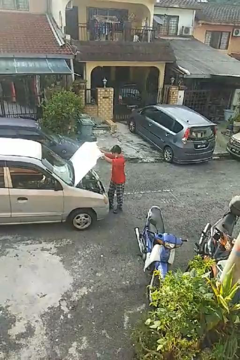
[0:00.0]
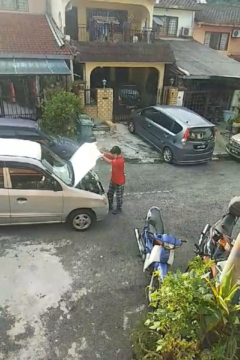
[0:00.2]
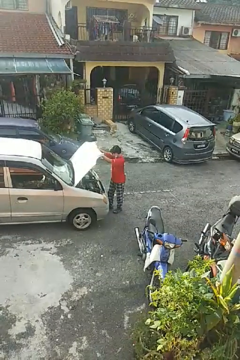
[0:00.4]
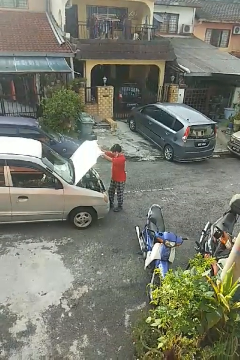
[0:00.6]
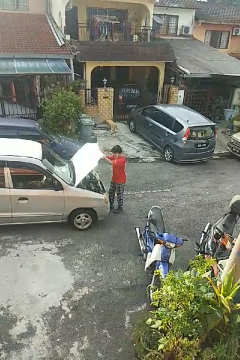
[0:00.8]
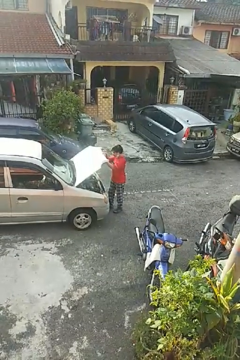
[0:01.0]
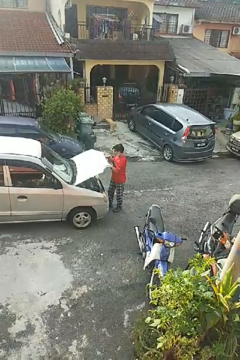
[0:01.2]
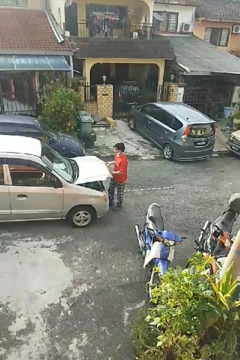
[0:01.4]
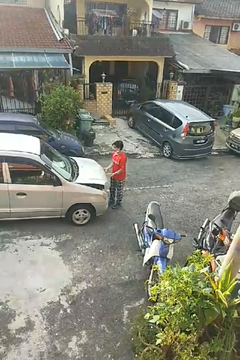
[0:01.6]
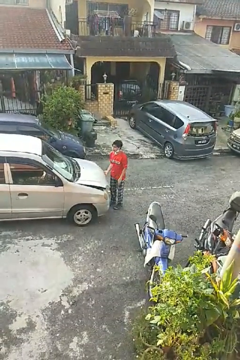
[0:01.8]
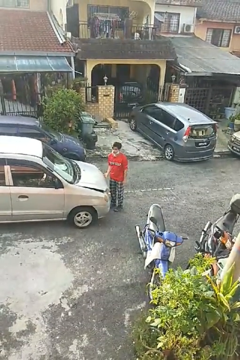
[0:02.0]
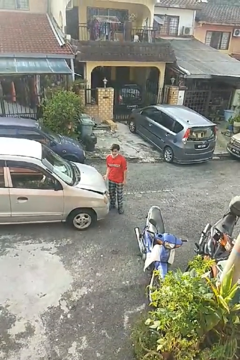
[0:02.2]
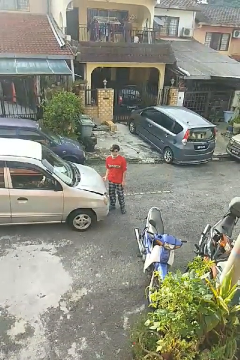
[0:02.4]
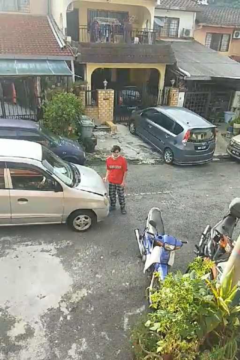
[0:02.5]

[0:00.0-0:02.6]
person closes car hood

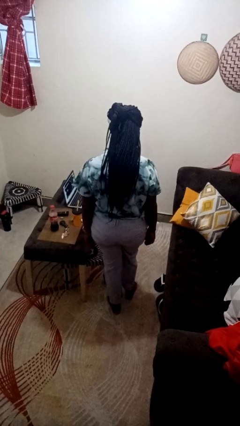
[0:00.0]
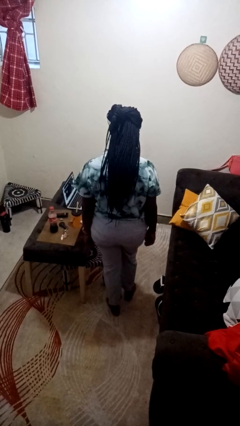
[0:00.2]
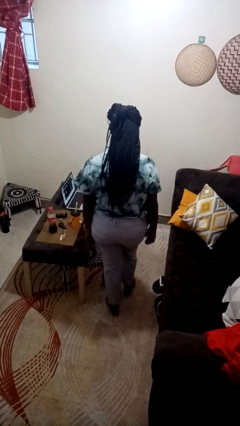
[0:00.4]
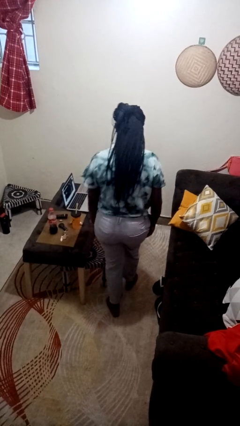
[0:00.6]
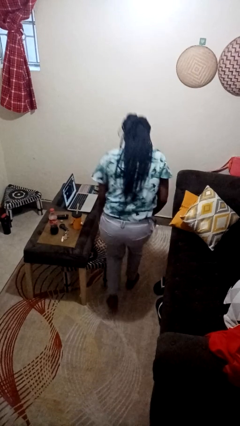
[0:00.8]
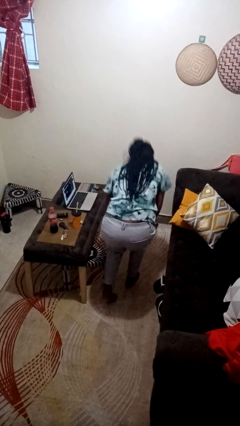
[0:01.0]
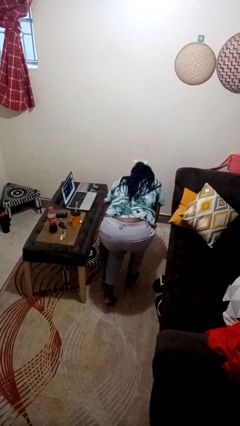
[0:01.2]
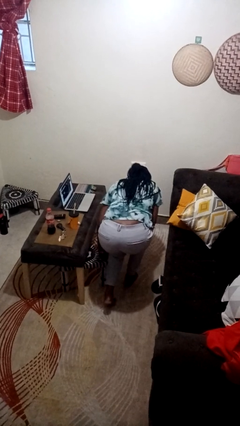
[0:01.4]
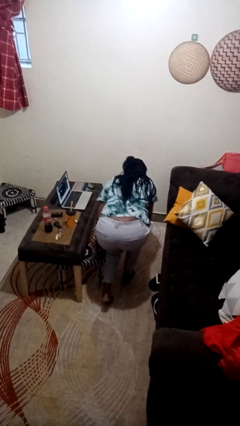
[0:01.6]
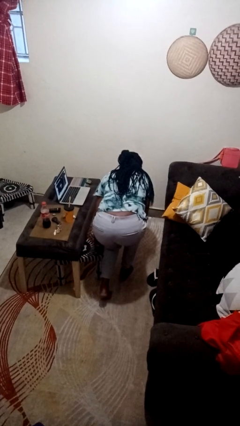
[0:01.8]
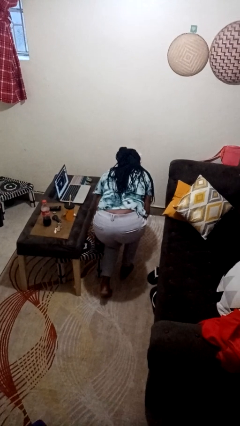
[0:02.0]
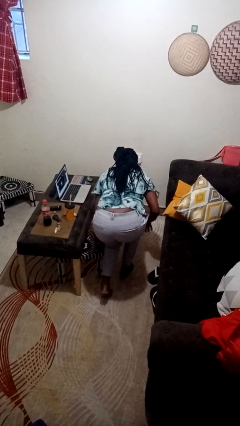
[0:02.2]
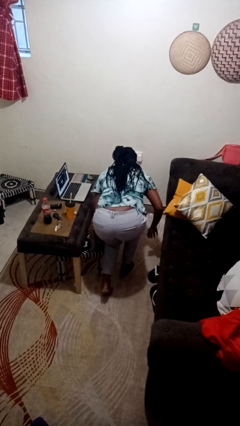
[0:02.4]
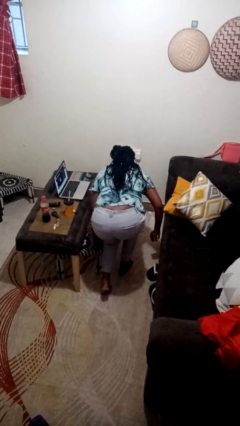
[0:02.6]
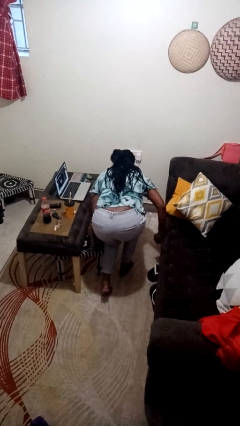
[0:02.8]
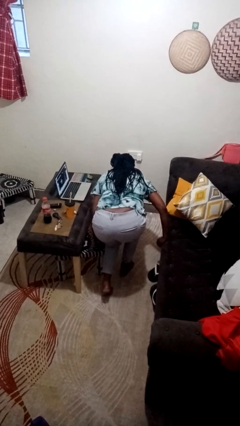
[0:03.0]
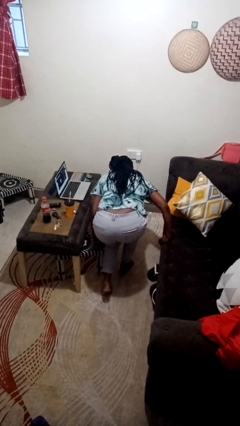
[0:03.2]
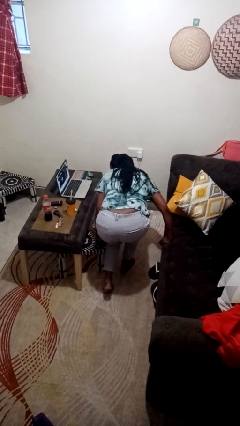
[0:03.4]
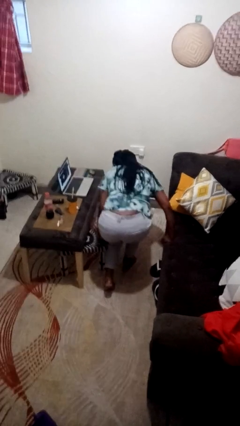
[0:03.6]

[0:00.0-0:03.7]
person trips on object on floor

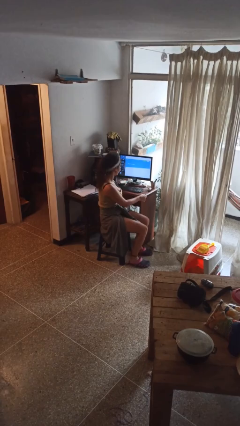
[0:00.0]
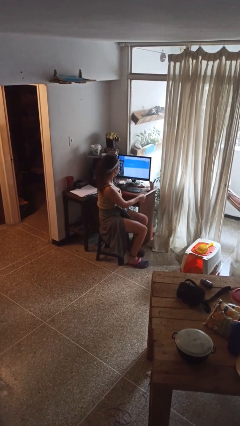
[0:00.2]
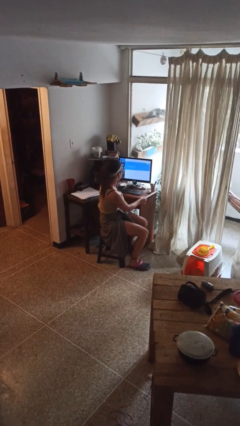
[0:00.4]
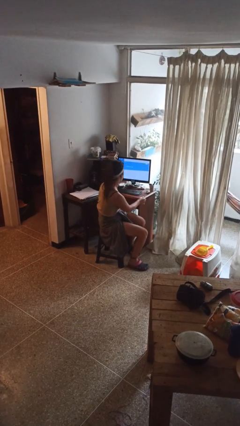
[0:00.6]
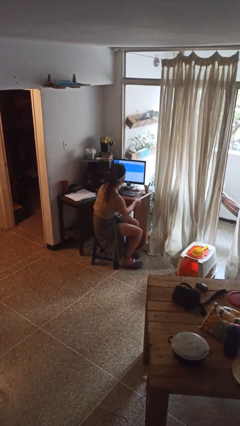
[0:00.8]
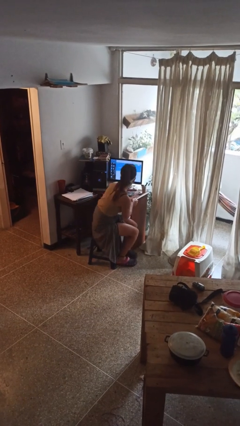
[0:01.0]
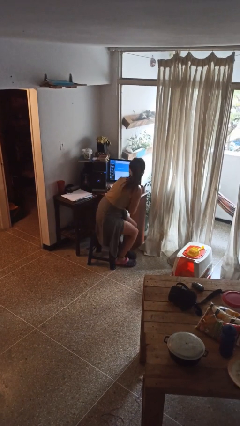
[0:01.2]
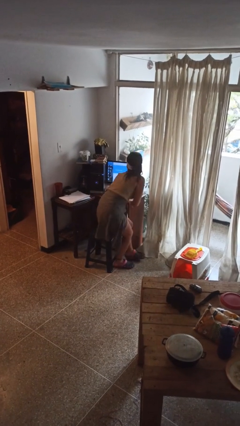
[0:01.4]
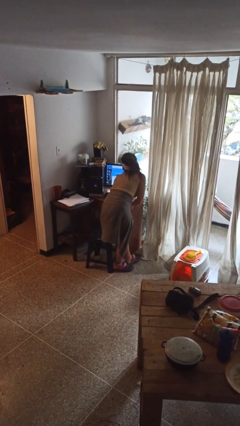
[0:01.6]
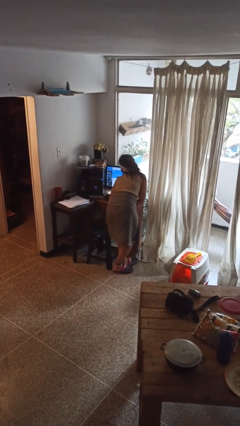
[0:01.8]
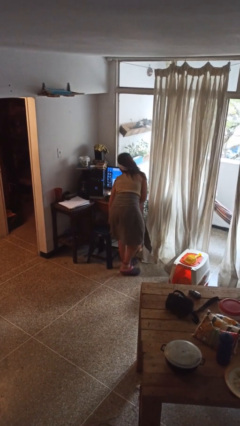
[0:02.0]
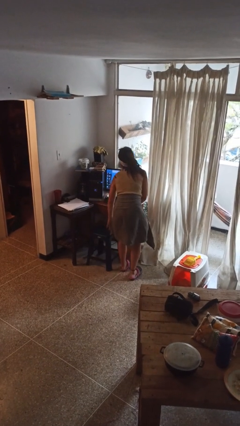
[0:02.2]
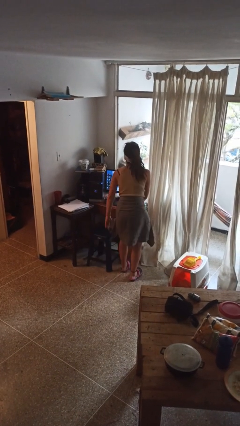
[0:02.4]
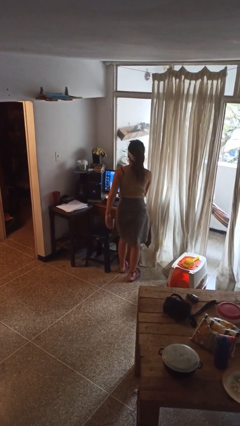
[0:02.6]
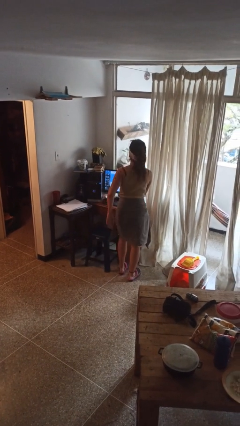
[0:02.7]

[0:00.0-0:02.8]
person stands up

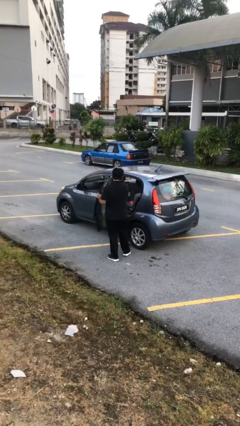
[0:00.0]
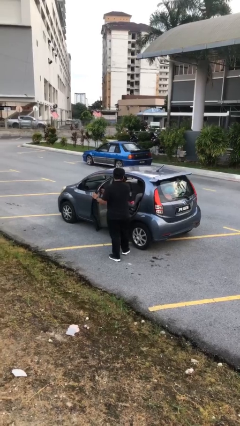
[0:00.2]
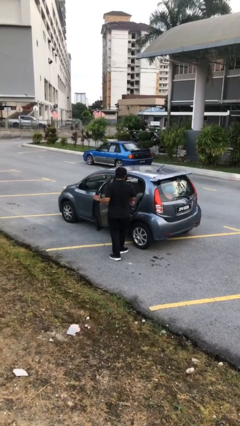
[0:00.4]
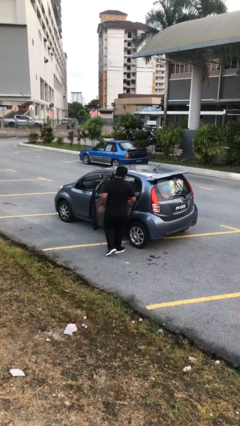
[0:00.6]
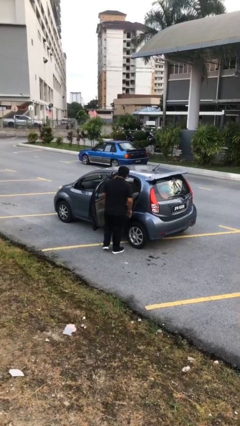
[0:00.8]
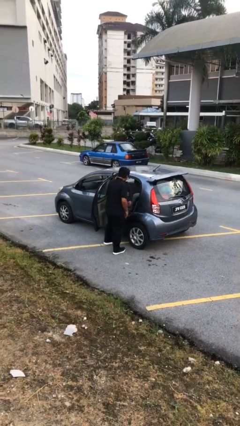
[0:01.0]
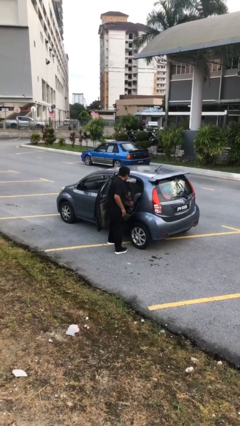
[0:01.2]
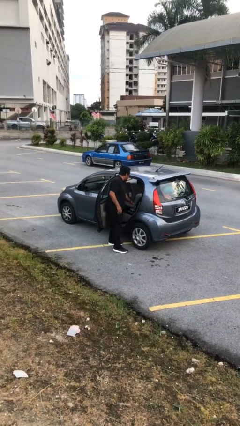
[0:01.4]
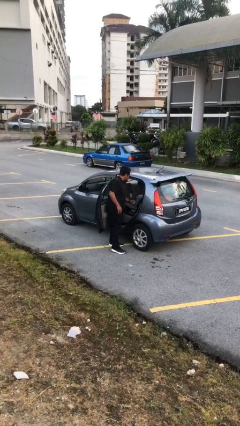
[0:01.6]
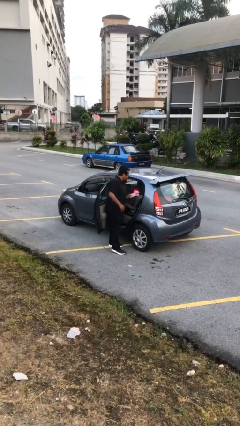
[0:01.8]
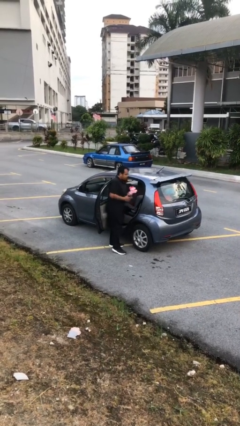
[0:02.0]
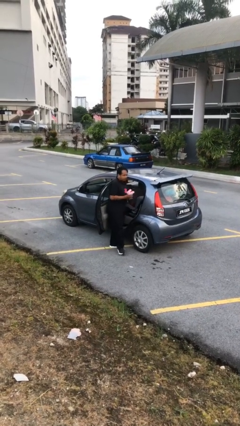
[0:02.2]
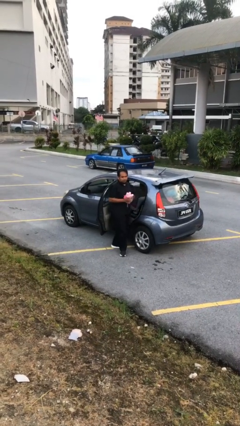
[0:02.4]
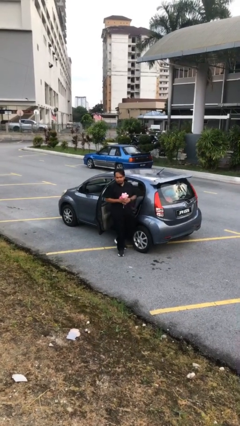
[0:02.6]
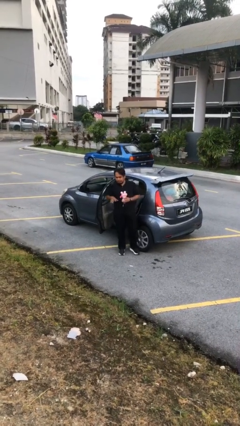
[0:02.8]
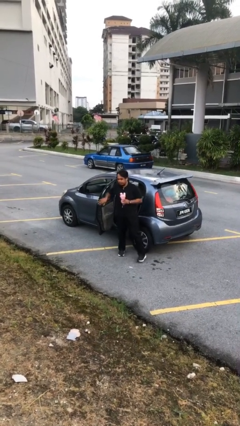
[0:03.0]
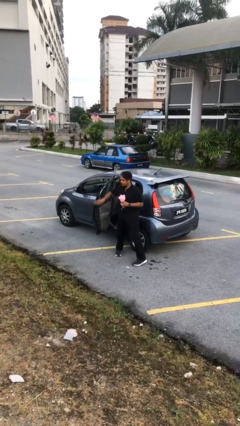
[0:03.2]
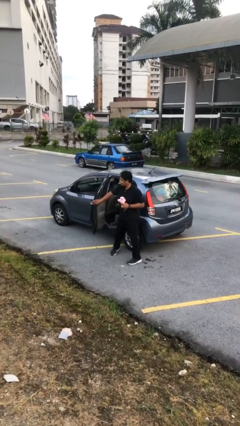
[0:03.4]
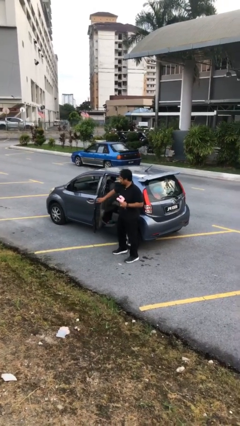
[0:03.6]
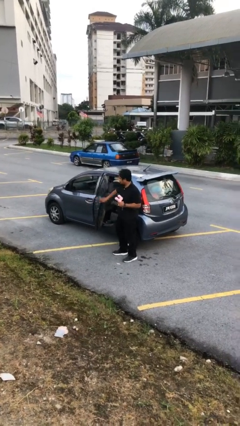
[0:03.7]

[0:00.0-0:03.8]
person unloads car

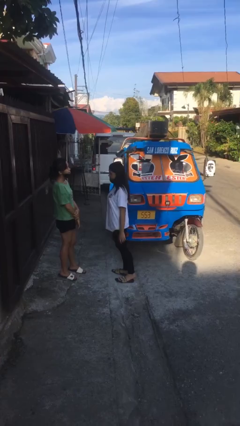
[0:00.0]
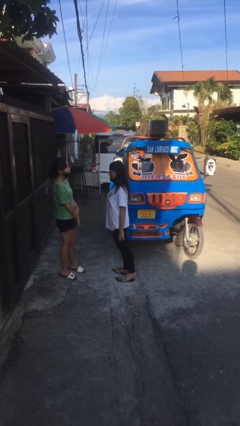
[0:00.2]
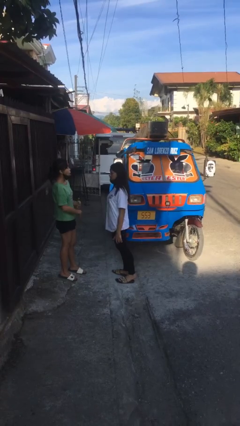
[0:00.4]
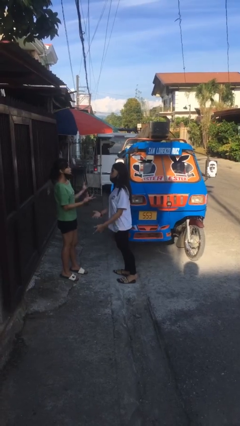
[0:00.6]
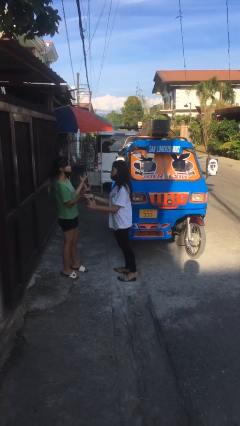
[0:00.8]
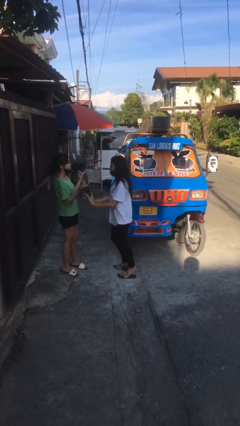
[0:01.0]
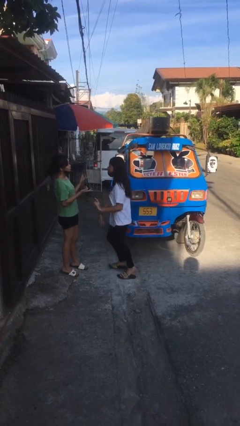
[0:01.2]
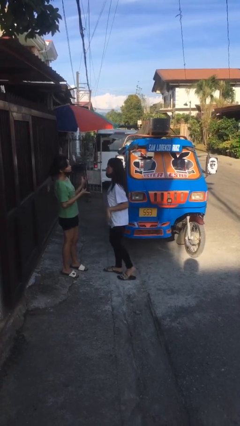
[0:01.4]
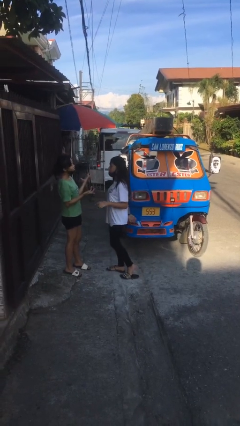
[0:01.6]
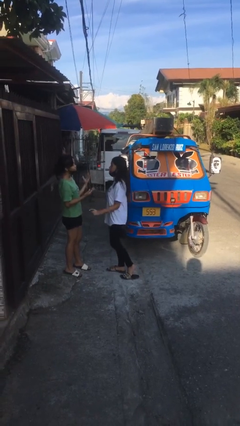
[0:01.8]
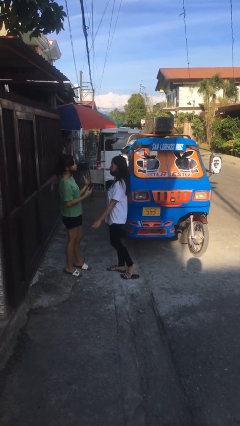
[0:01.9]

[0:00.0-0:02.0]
person talks to person

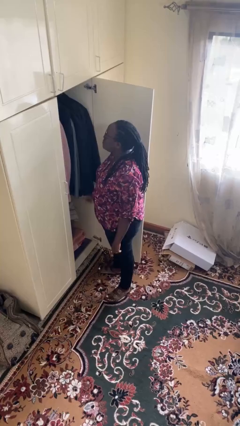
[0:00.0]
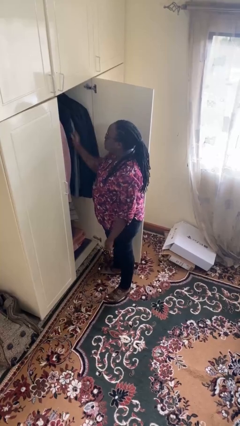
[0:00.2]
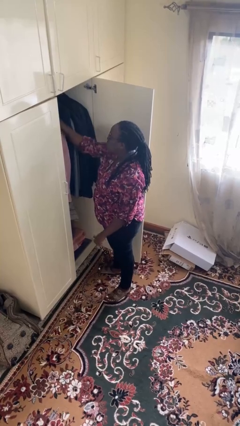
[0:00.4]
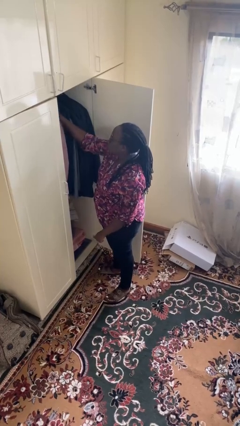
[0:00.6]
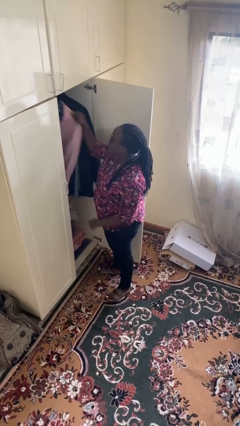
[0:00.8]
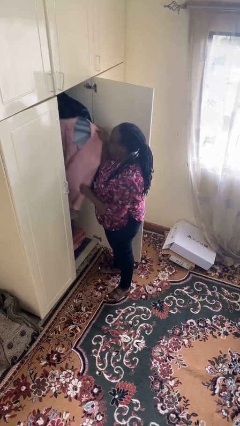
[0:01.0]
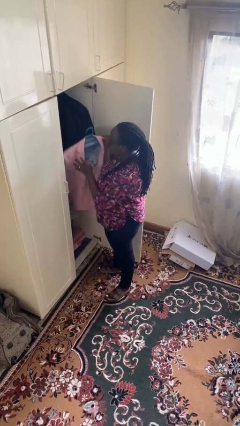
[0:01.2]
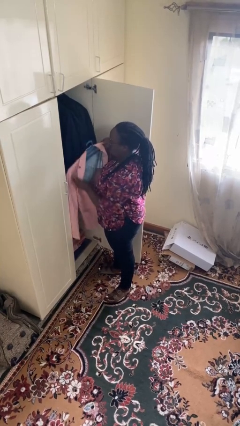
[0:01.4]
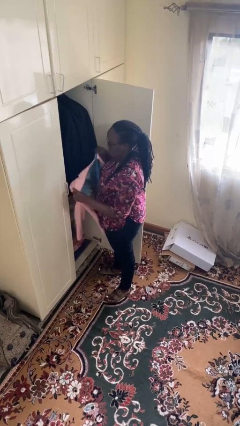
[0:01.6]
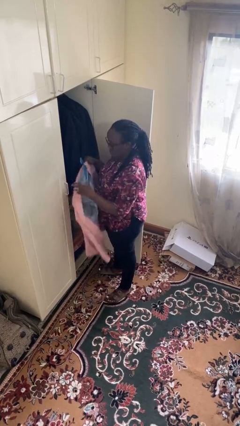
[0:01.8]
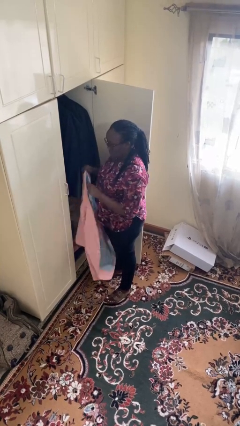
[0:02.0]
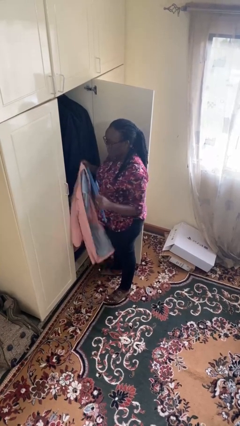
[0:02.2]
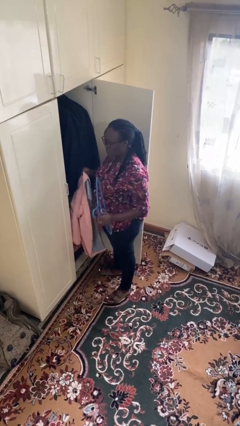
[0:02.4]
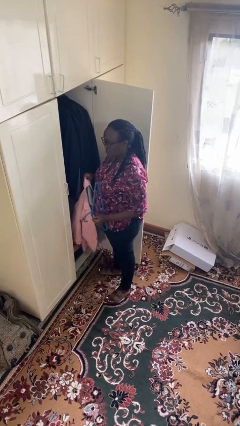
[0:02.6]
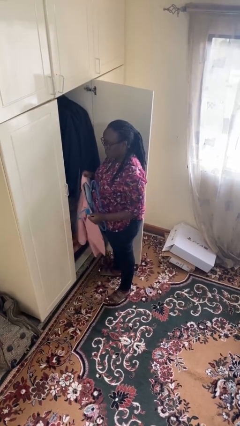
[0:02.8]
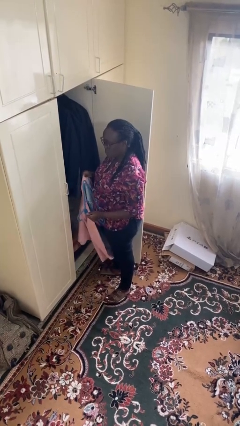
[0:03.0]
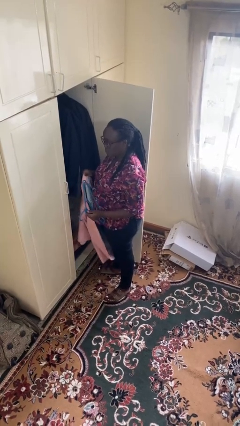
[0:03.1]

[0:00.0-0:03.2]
person takes clothes from closet
